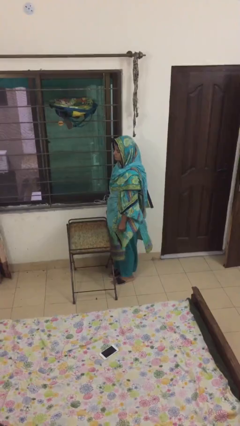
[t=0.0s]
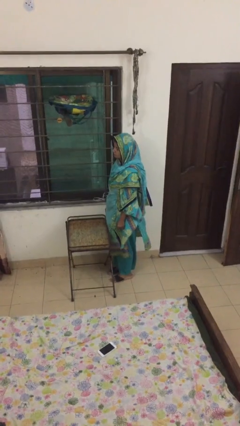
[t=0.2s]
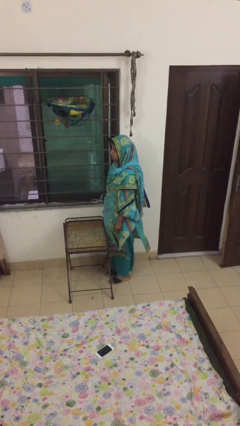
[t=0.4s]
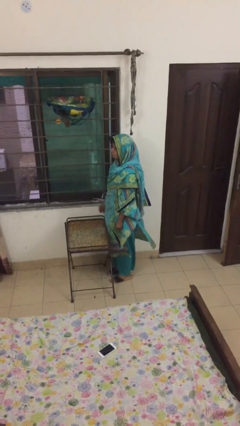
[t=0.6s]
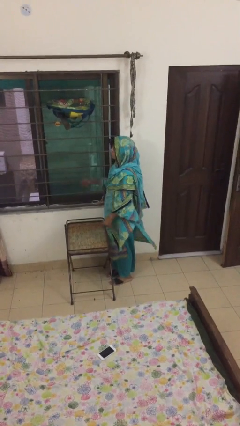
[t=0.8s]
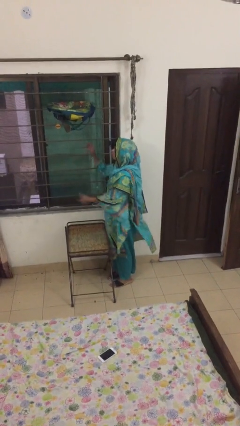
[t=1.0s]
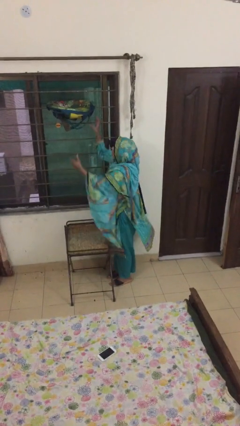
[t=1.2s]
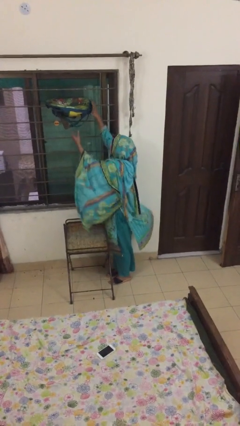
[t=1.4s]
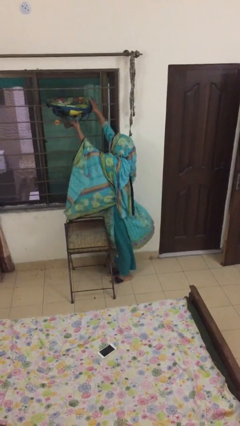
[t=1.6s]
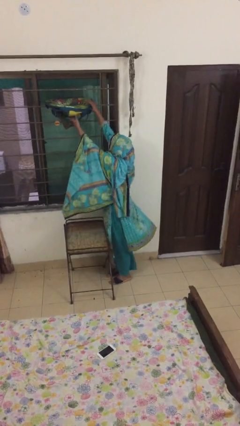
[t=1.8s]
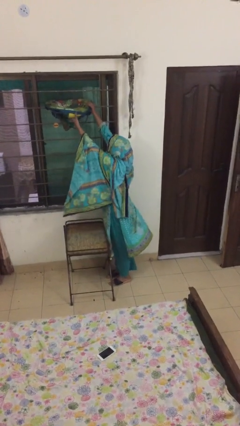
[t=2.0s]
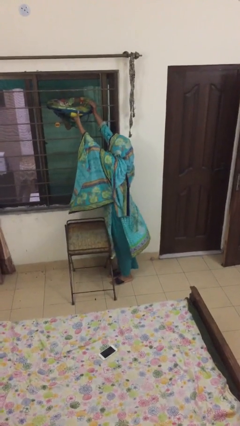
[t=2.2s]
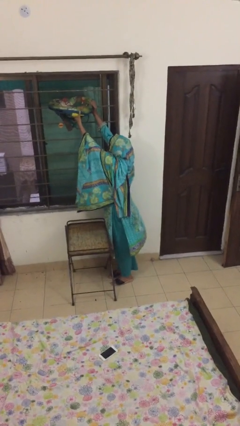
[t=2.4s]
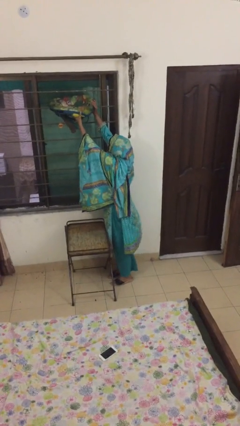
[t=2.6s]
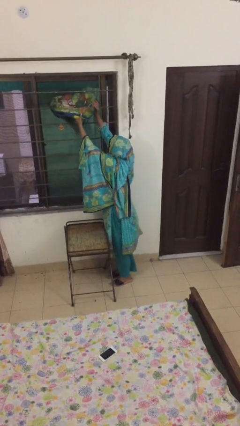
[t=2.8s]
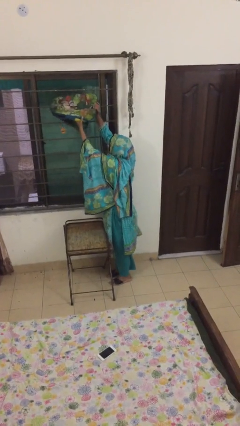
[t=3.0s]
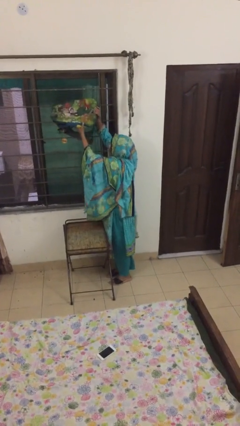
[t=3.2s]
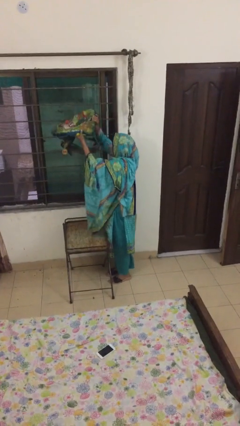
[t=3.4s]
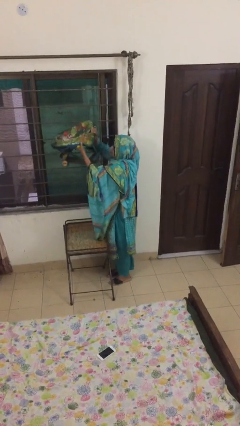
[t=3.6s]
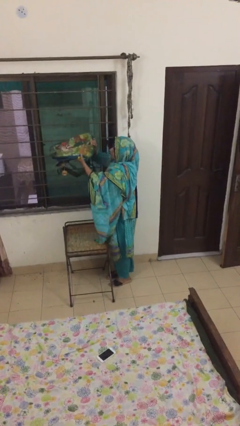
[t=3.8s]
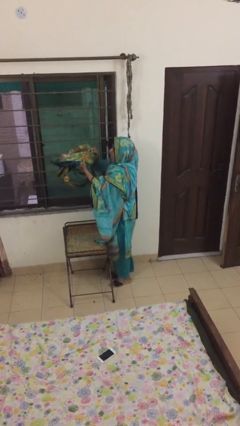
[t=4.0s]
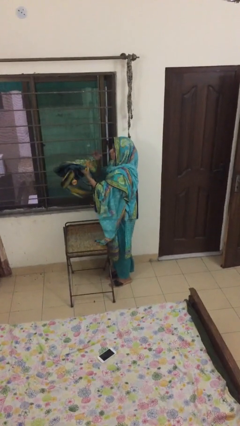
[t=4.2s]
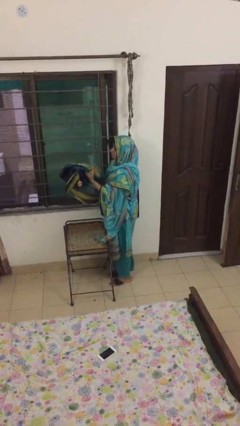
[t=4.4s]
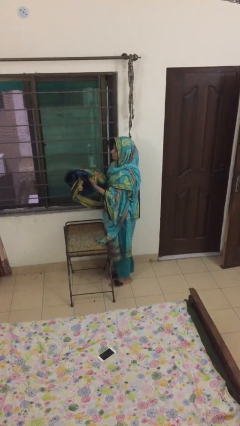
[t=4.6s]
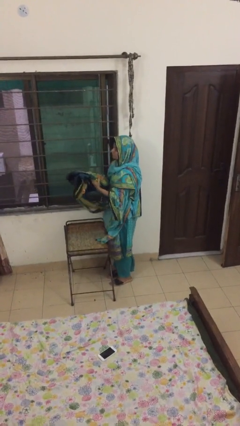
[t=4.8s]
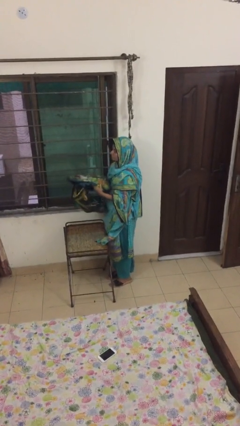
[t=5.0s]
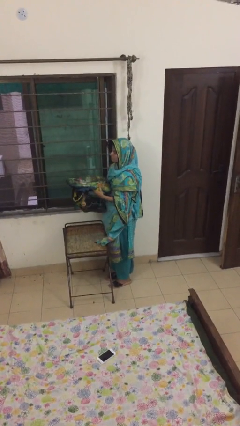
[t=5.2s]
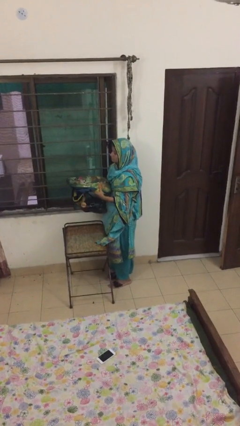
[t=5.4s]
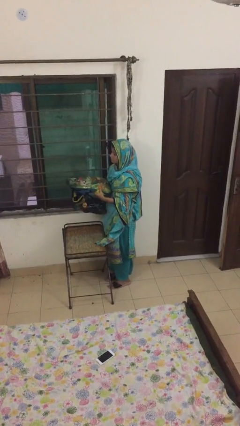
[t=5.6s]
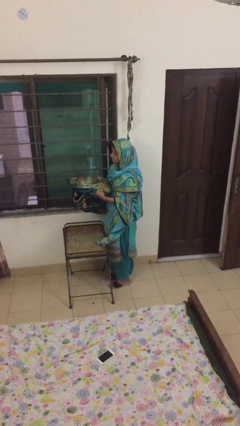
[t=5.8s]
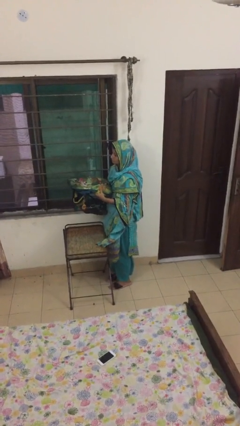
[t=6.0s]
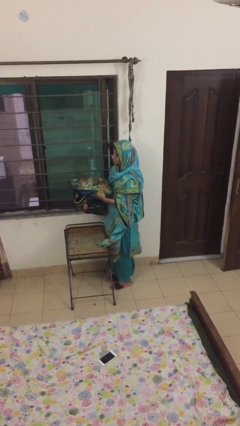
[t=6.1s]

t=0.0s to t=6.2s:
person picks up object from shelf

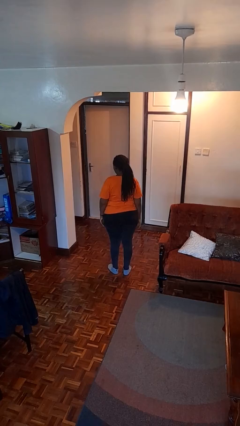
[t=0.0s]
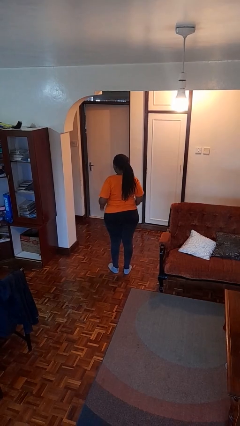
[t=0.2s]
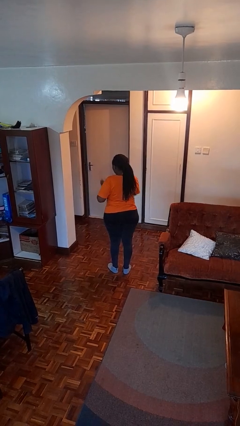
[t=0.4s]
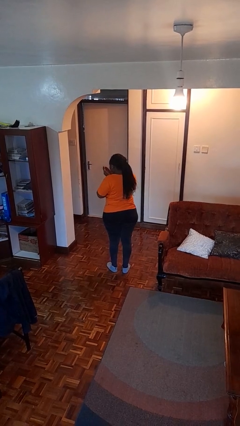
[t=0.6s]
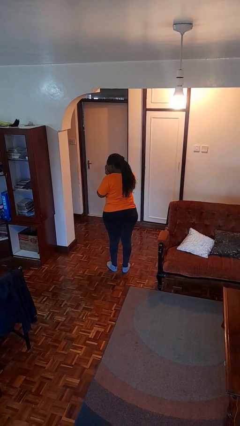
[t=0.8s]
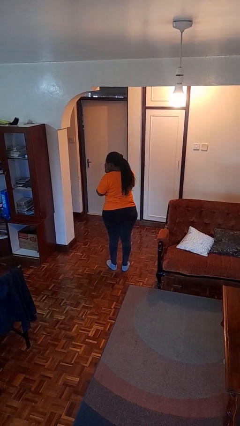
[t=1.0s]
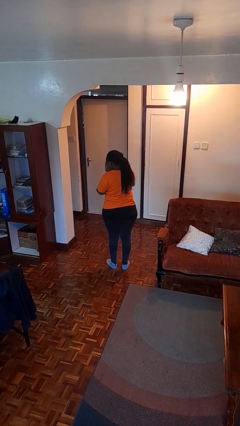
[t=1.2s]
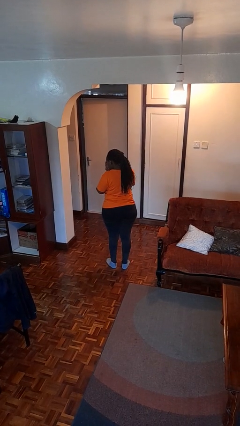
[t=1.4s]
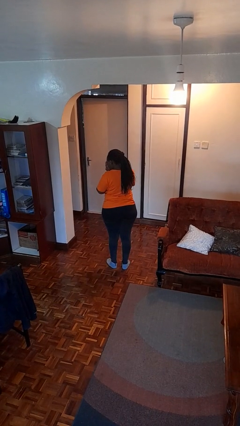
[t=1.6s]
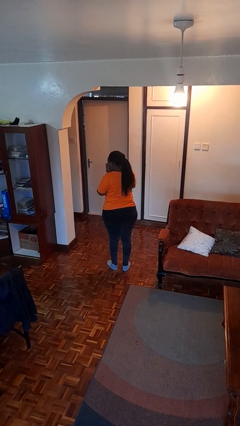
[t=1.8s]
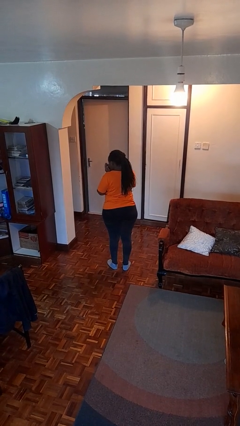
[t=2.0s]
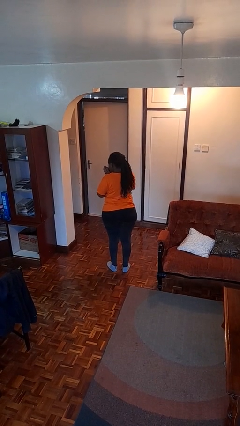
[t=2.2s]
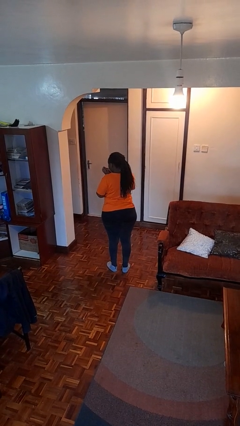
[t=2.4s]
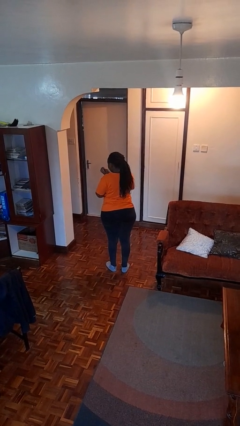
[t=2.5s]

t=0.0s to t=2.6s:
person sneezes into hand

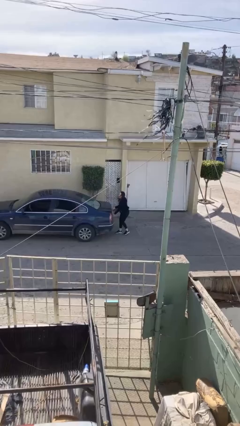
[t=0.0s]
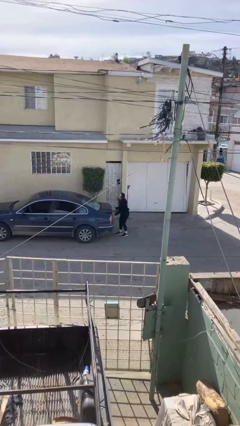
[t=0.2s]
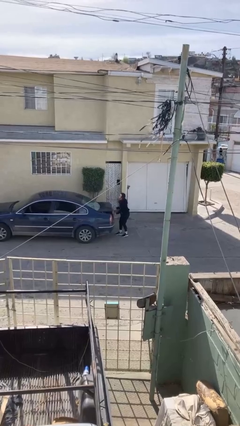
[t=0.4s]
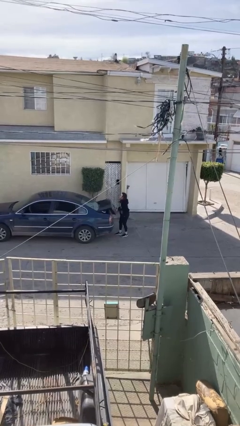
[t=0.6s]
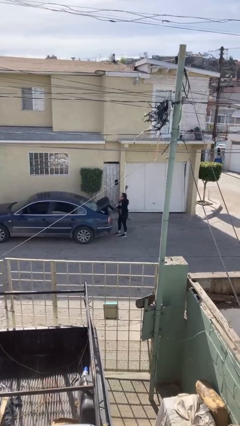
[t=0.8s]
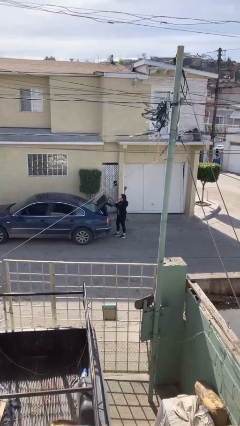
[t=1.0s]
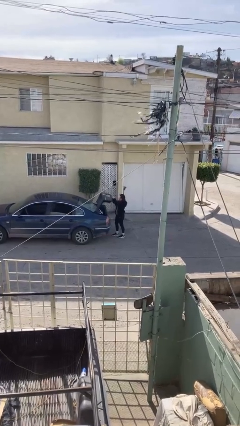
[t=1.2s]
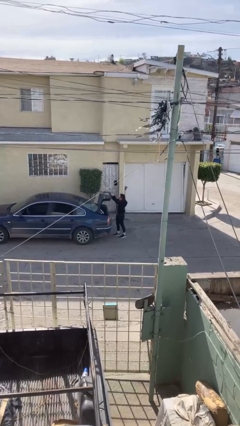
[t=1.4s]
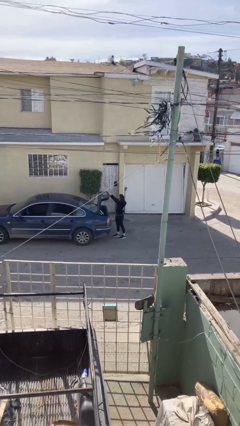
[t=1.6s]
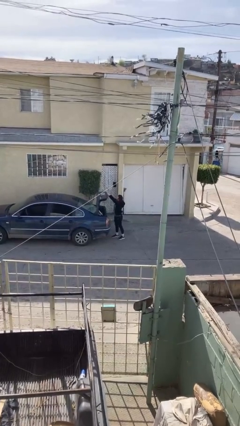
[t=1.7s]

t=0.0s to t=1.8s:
person opens car trunk

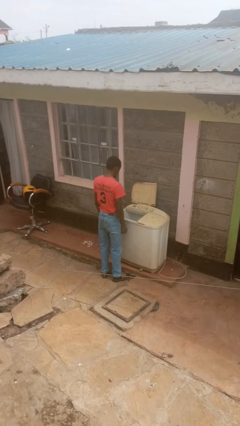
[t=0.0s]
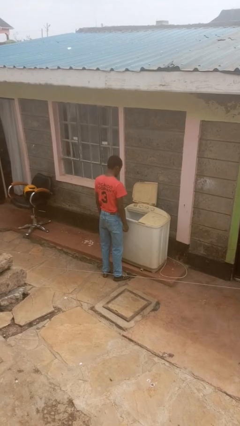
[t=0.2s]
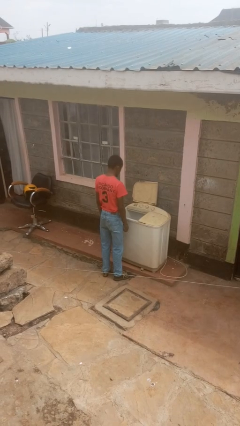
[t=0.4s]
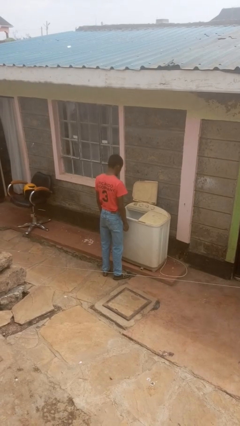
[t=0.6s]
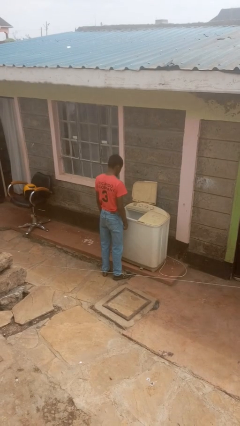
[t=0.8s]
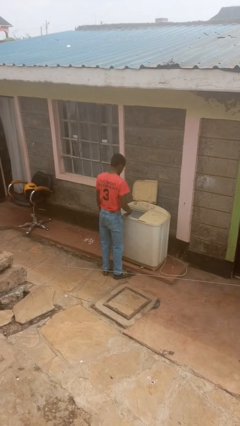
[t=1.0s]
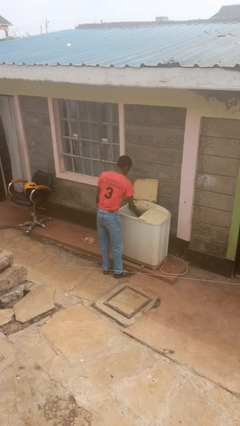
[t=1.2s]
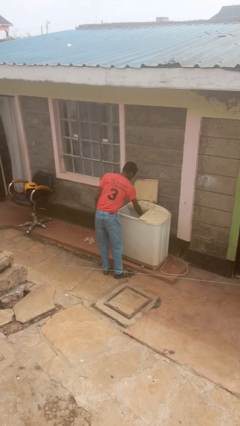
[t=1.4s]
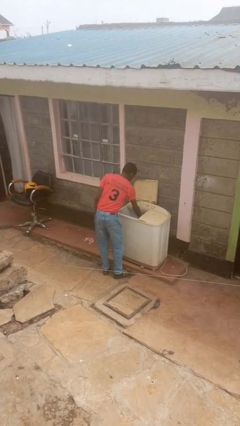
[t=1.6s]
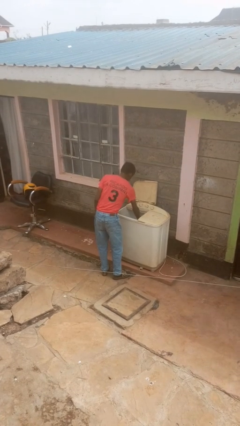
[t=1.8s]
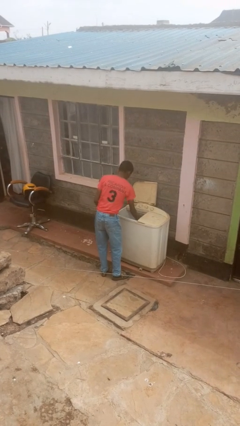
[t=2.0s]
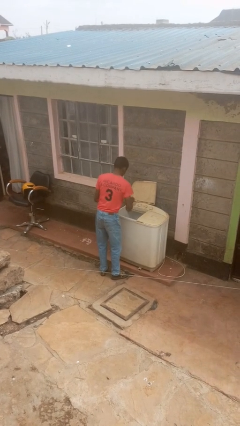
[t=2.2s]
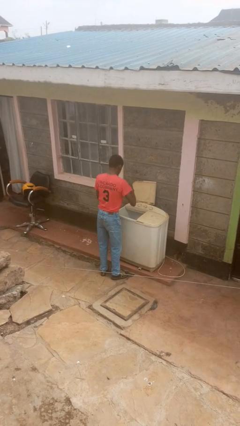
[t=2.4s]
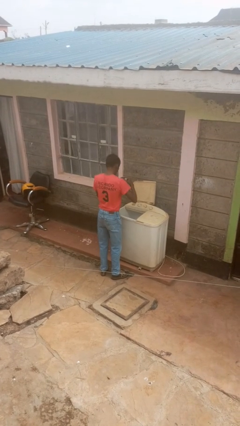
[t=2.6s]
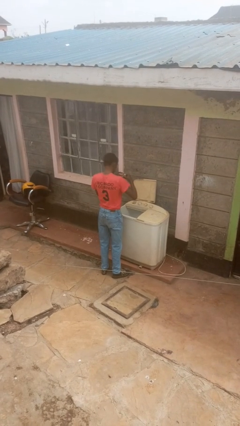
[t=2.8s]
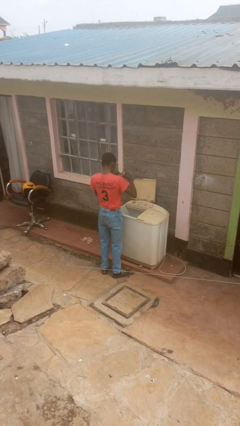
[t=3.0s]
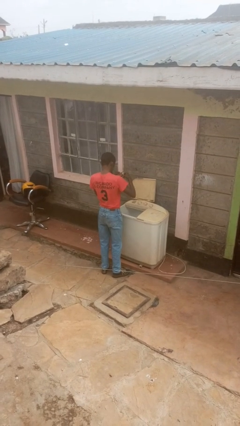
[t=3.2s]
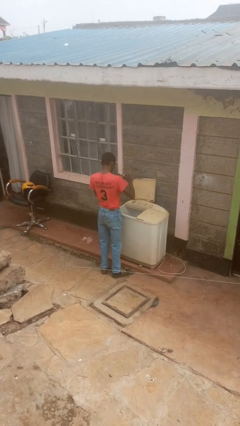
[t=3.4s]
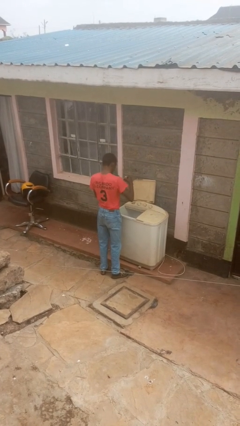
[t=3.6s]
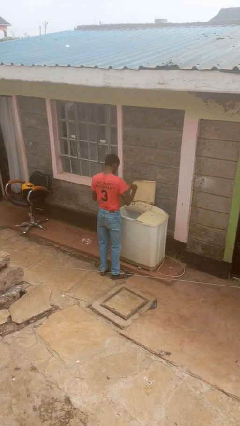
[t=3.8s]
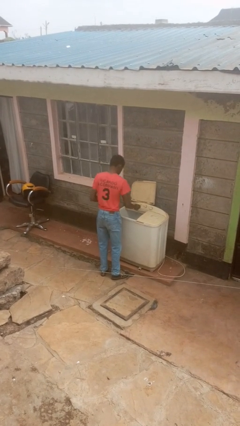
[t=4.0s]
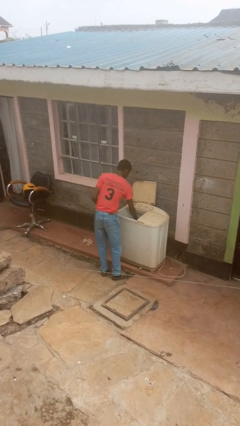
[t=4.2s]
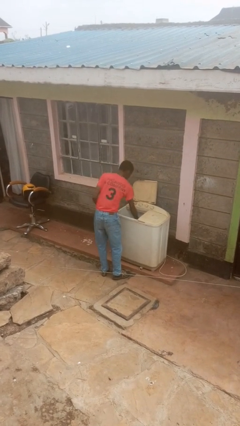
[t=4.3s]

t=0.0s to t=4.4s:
person cleans dryer lint trap

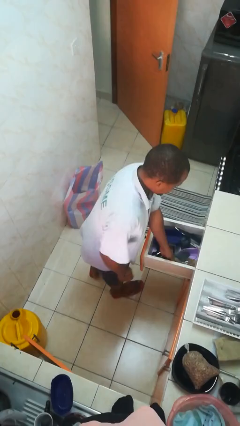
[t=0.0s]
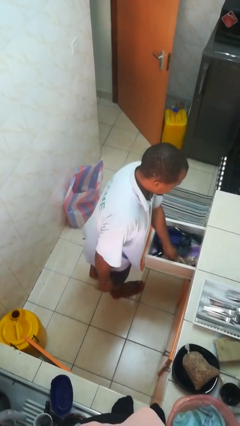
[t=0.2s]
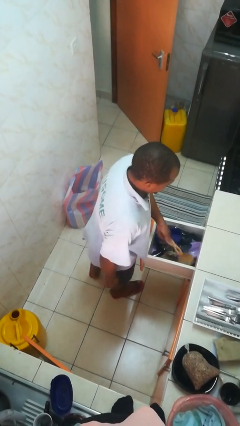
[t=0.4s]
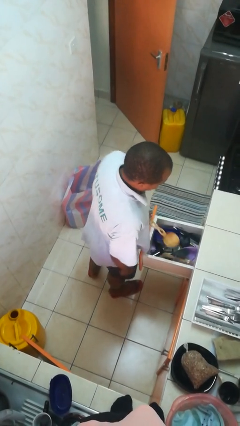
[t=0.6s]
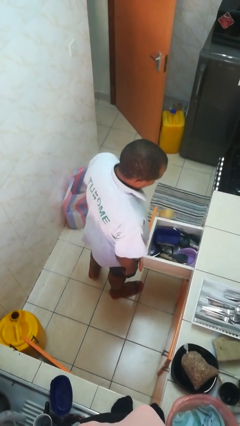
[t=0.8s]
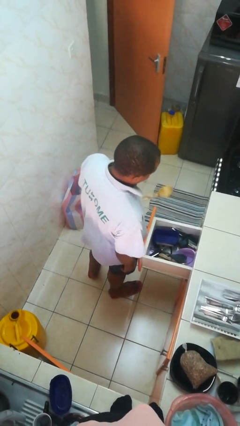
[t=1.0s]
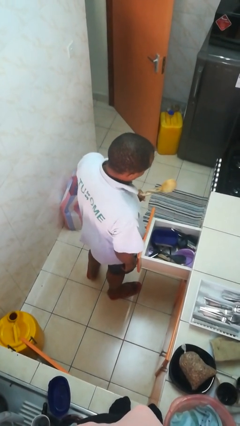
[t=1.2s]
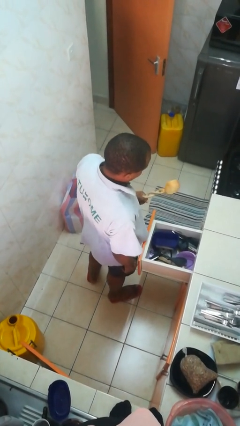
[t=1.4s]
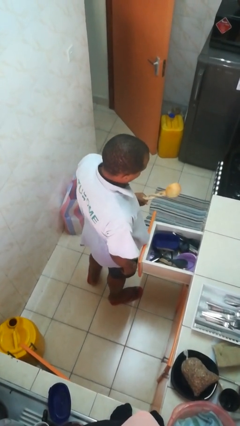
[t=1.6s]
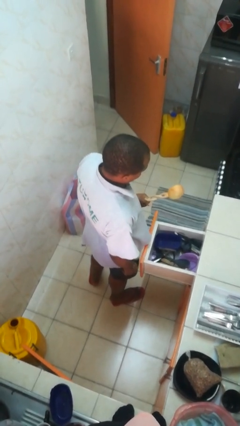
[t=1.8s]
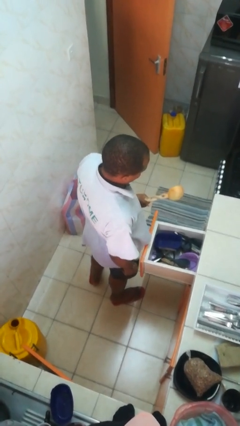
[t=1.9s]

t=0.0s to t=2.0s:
person takes object from kitchen drawer

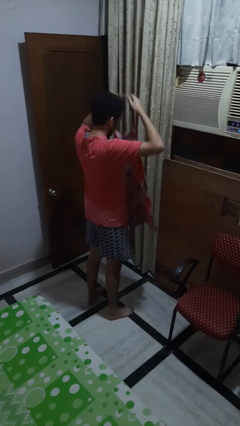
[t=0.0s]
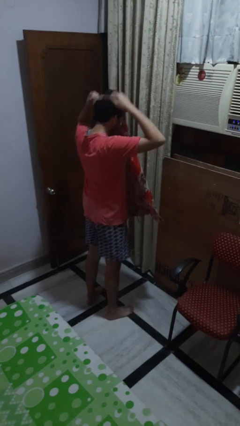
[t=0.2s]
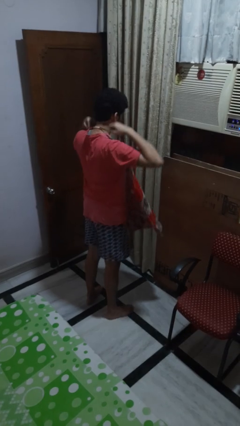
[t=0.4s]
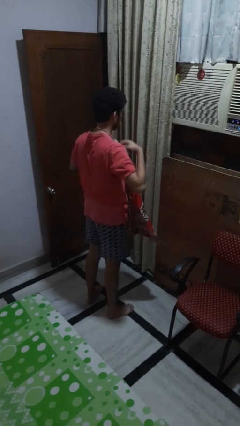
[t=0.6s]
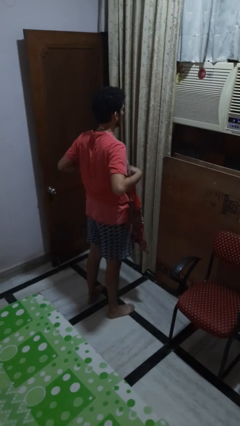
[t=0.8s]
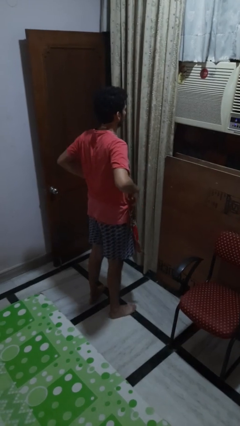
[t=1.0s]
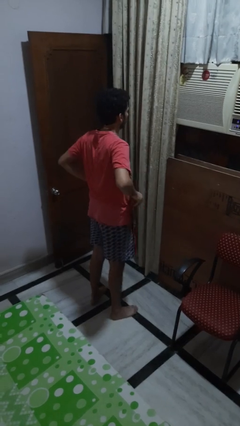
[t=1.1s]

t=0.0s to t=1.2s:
person puts on apron
